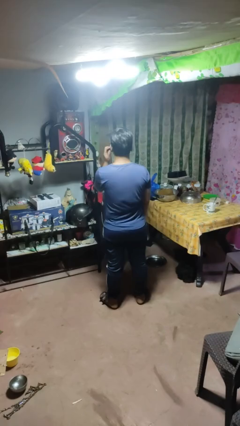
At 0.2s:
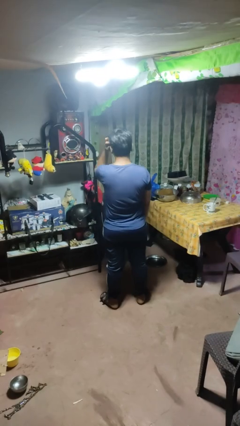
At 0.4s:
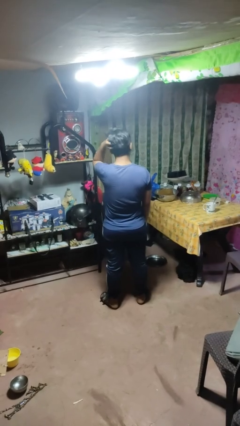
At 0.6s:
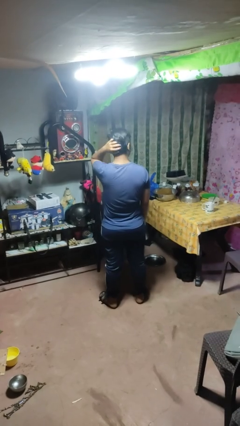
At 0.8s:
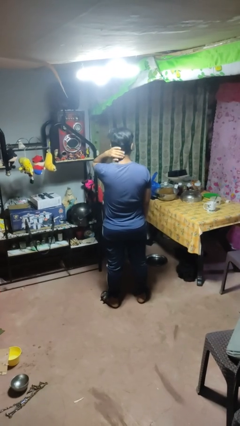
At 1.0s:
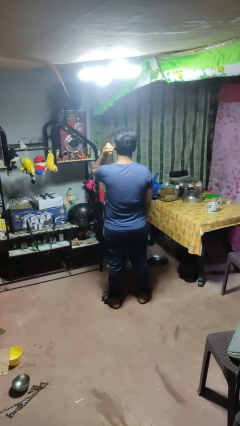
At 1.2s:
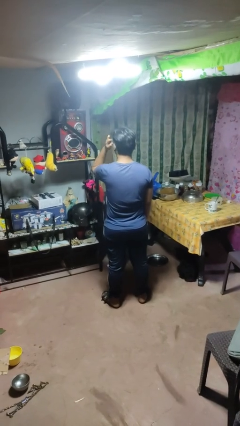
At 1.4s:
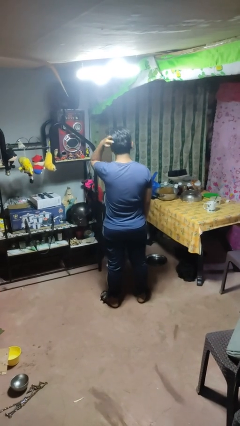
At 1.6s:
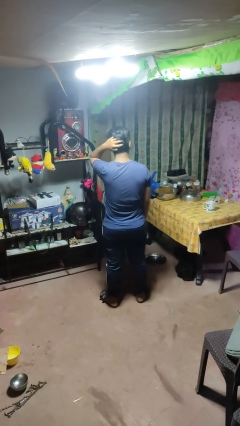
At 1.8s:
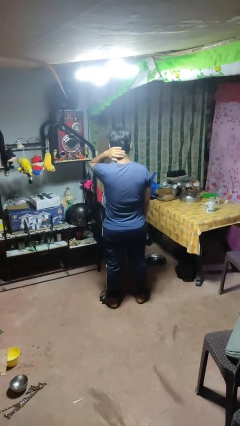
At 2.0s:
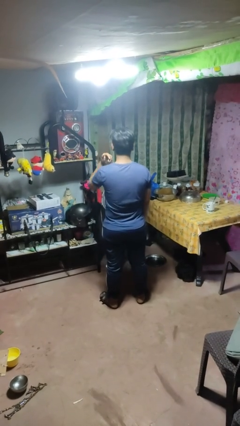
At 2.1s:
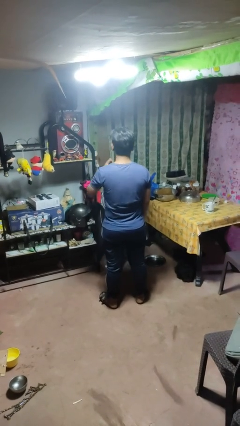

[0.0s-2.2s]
person strokes hair

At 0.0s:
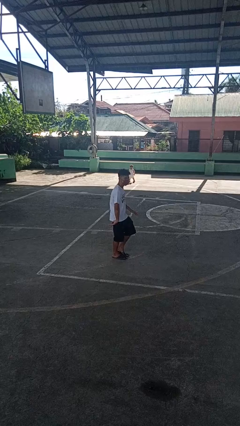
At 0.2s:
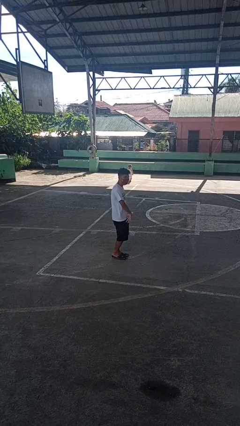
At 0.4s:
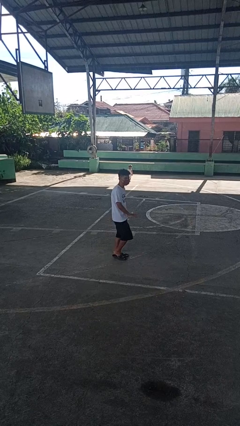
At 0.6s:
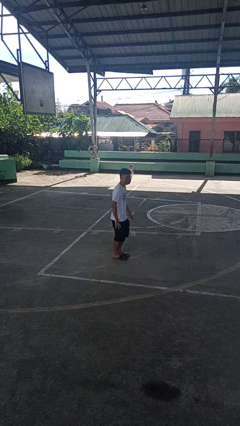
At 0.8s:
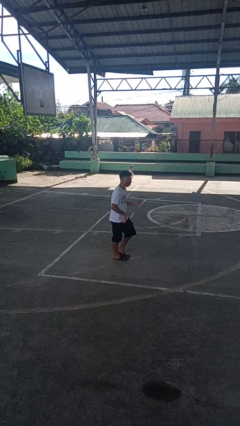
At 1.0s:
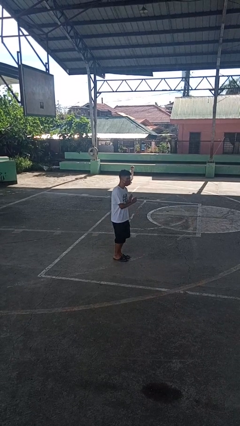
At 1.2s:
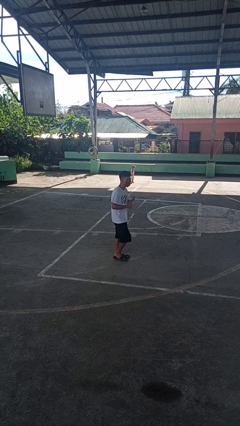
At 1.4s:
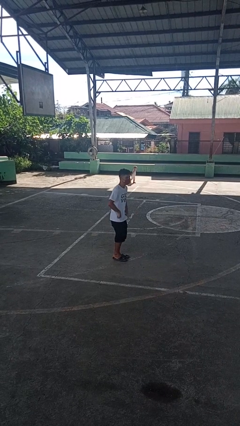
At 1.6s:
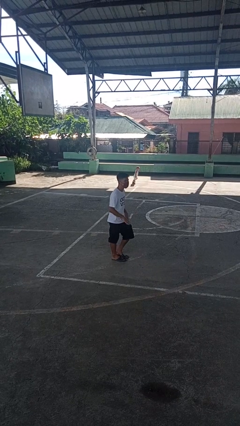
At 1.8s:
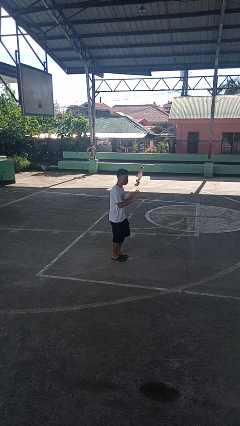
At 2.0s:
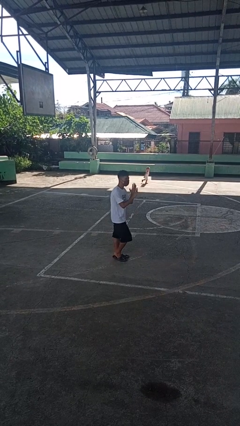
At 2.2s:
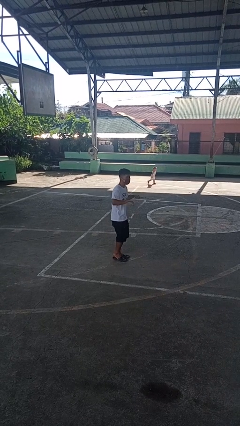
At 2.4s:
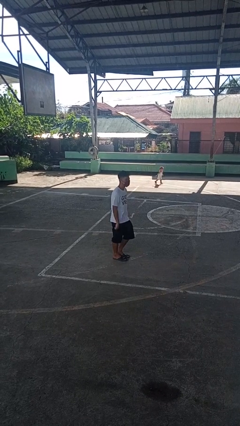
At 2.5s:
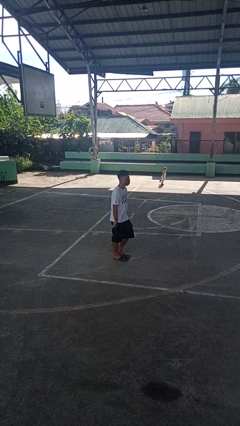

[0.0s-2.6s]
person dances in place

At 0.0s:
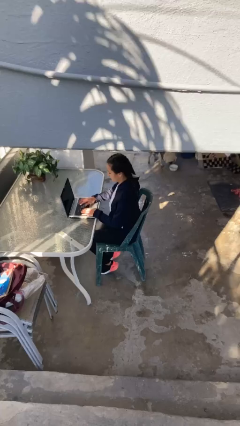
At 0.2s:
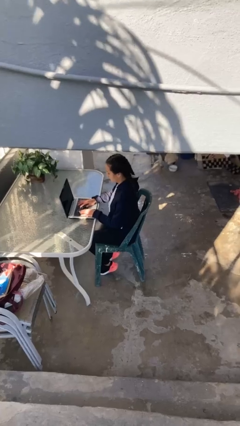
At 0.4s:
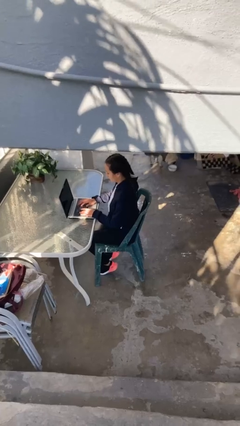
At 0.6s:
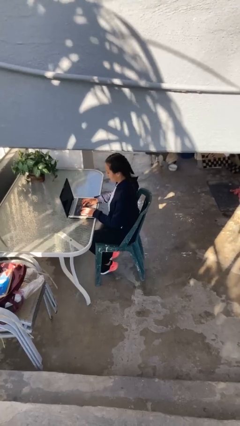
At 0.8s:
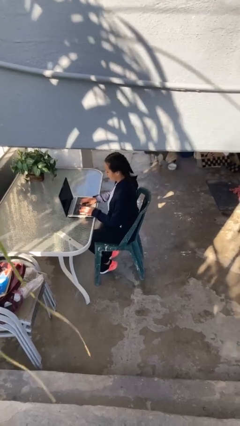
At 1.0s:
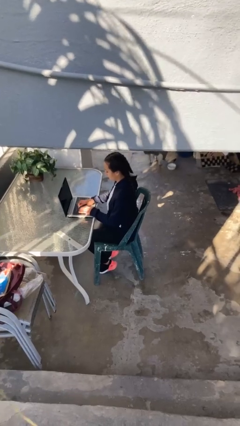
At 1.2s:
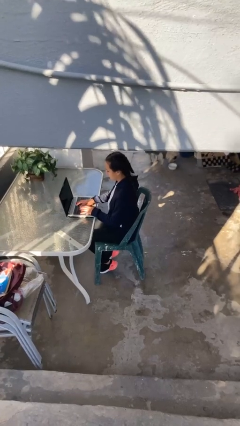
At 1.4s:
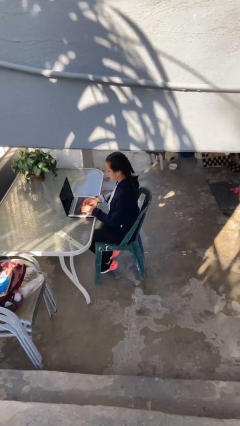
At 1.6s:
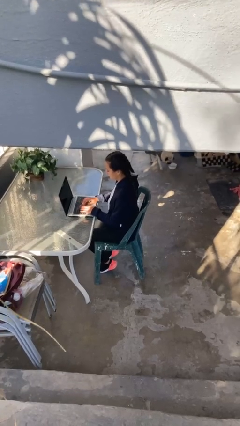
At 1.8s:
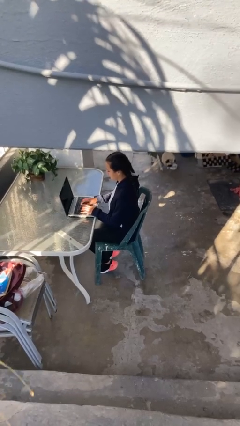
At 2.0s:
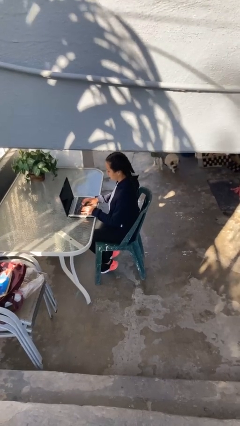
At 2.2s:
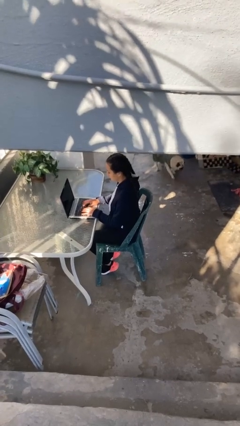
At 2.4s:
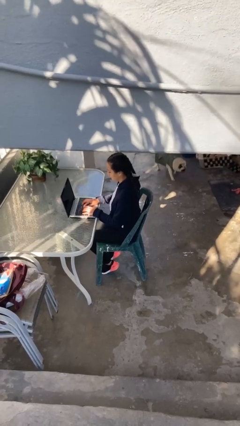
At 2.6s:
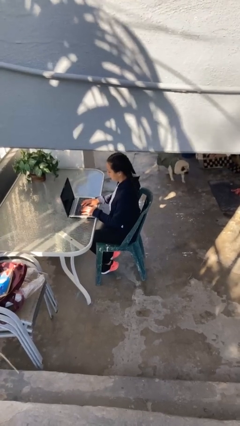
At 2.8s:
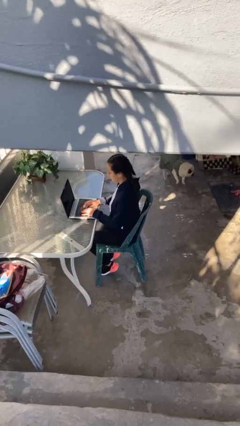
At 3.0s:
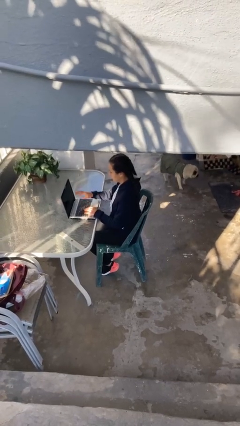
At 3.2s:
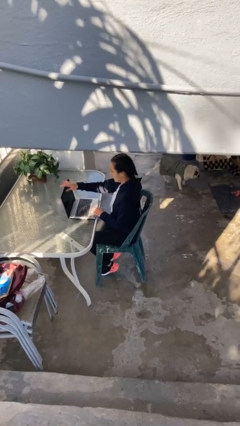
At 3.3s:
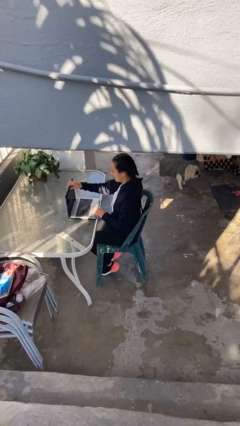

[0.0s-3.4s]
person interacts with laptop

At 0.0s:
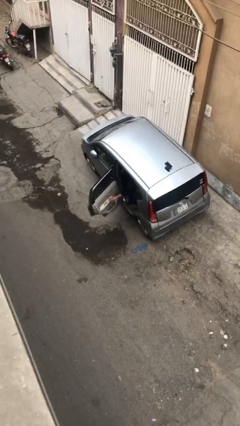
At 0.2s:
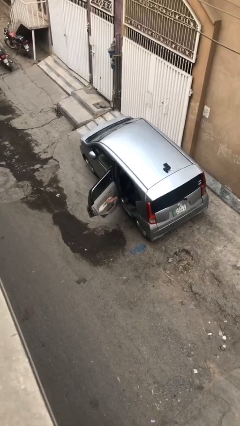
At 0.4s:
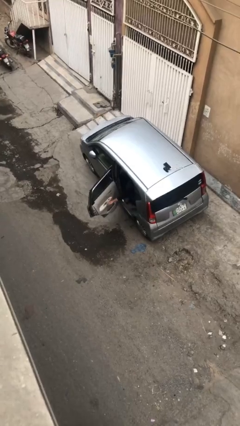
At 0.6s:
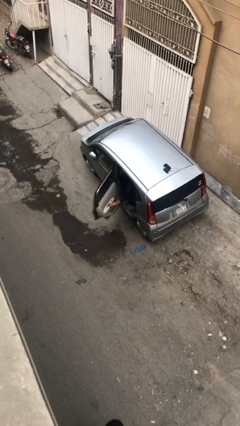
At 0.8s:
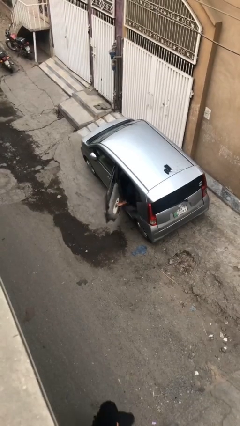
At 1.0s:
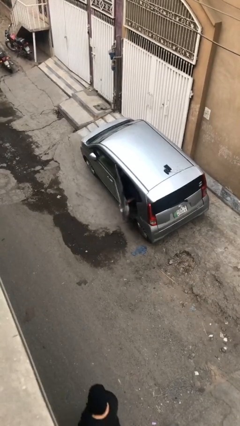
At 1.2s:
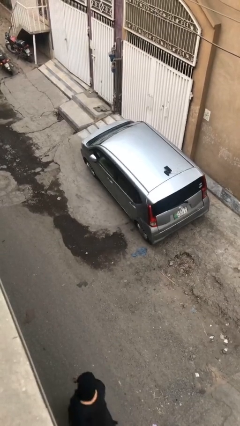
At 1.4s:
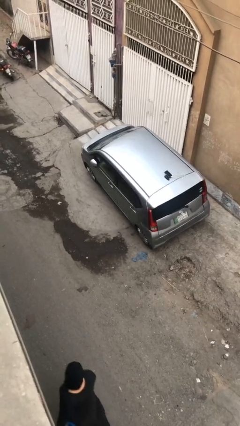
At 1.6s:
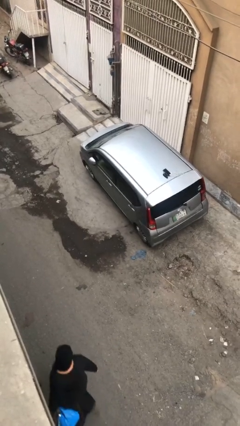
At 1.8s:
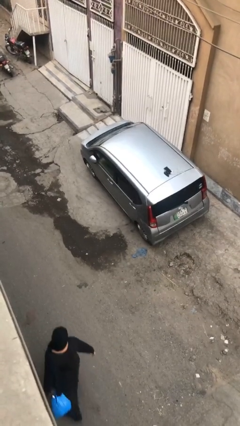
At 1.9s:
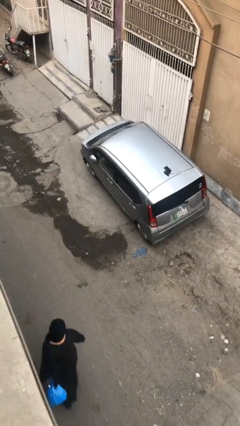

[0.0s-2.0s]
person closes car door

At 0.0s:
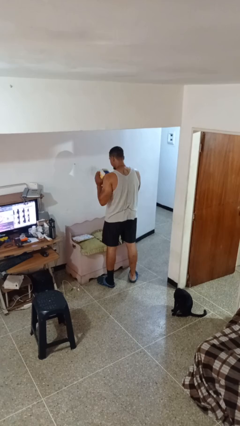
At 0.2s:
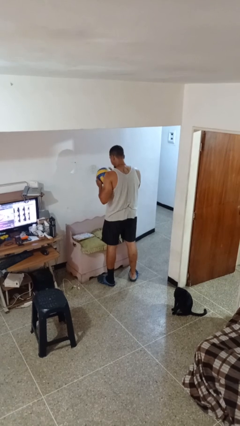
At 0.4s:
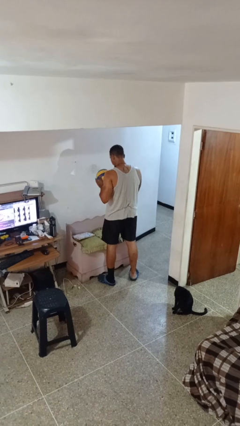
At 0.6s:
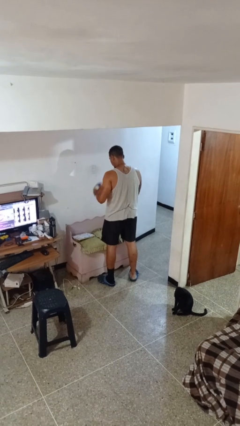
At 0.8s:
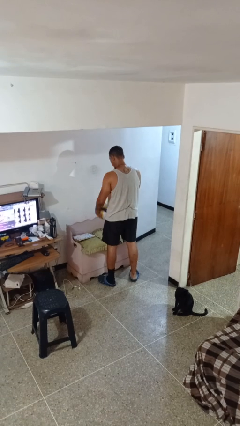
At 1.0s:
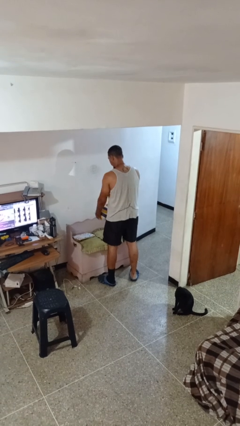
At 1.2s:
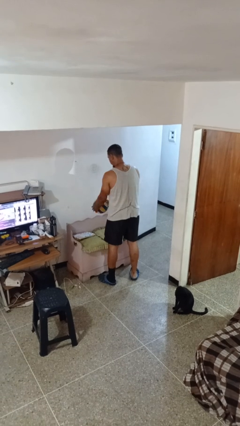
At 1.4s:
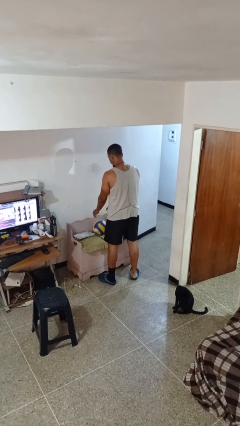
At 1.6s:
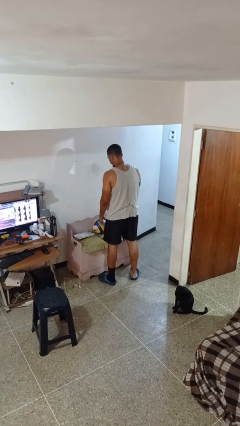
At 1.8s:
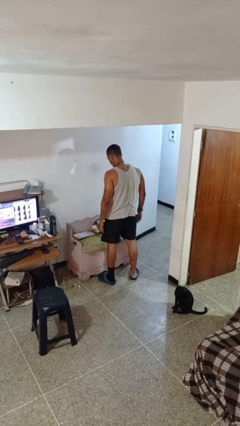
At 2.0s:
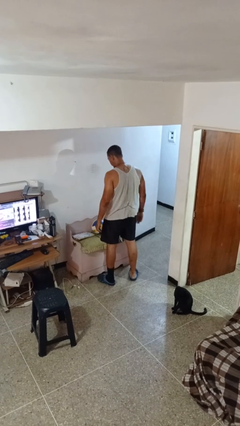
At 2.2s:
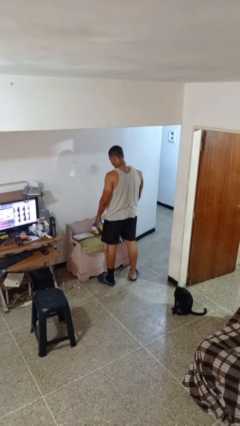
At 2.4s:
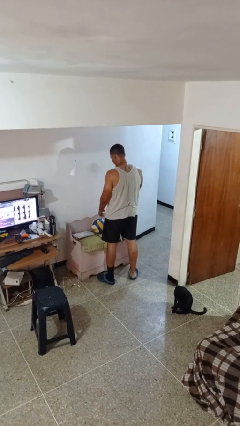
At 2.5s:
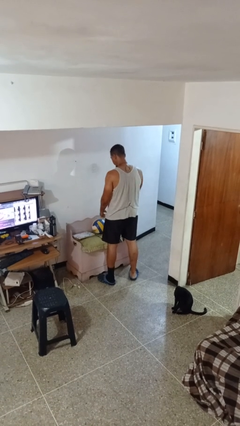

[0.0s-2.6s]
person puts down object on couch

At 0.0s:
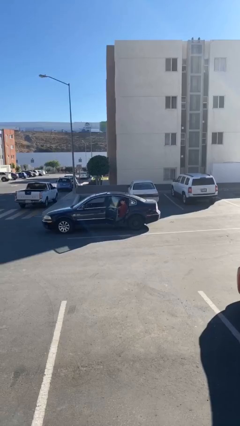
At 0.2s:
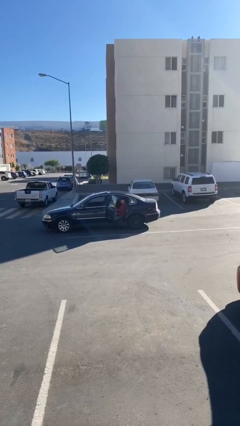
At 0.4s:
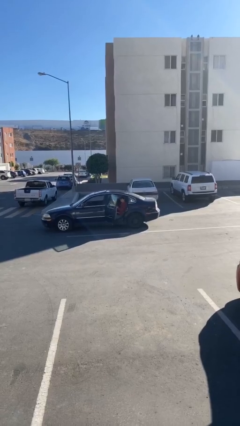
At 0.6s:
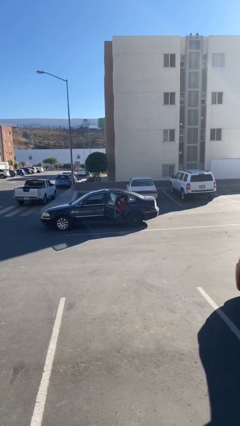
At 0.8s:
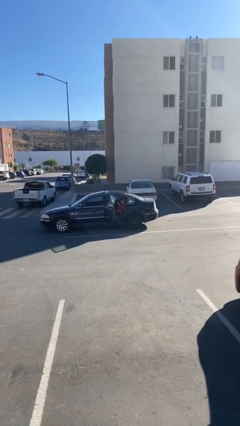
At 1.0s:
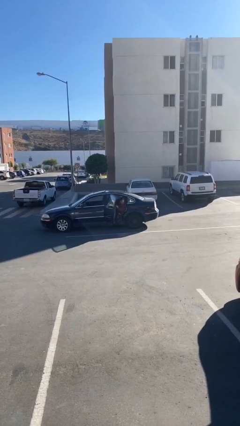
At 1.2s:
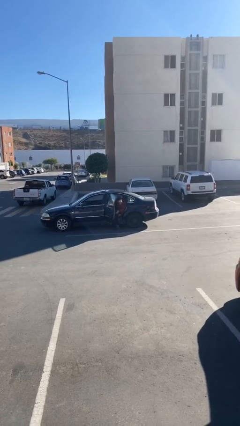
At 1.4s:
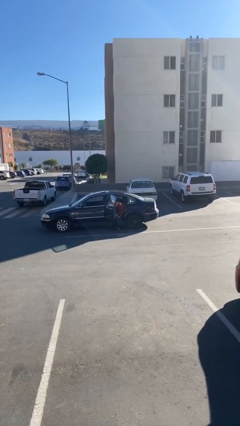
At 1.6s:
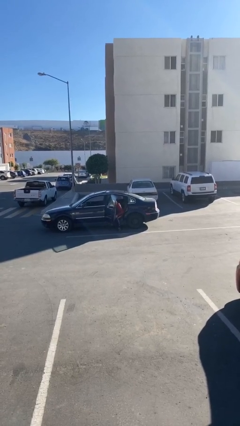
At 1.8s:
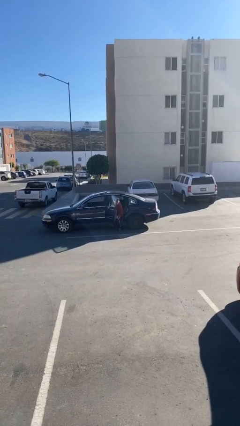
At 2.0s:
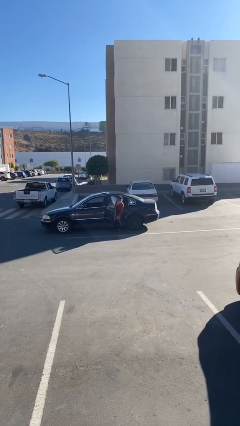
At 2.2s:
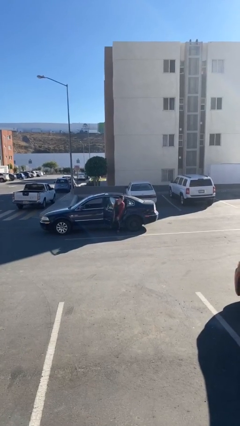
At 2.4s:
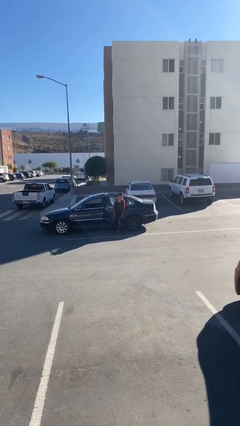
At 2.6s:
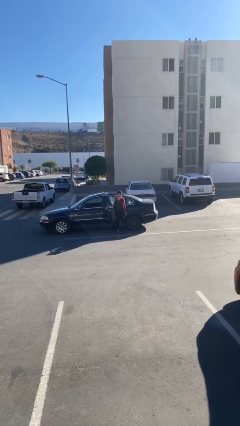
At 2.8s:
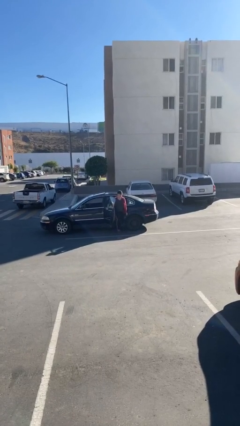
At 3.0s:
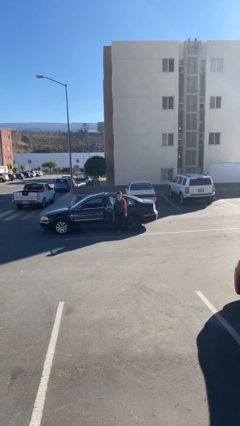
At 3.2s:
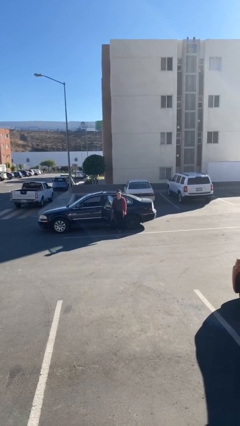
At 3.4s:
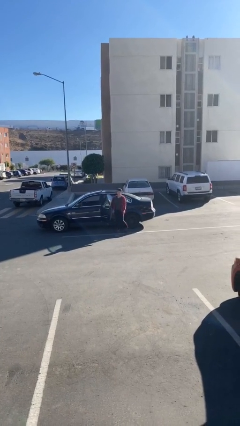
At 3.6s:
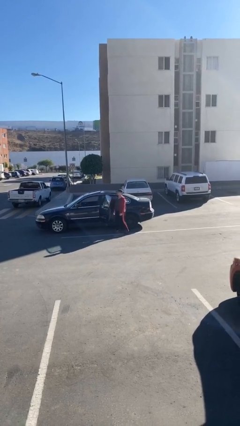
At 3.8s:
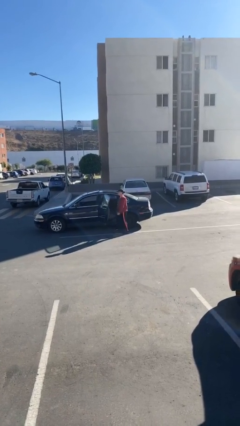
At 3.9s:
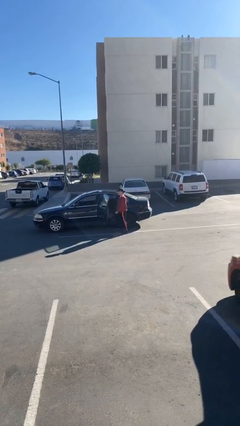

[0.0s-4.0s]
person exits car

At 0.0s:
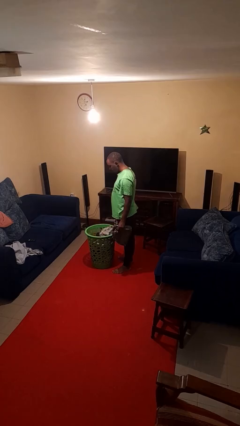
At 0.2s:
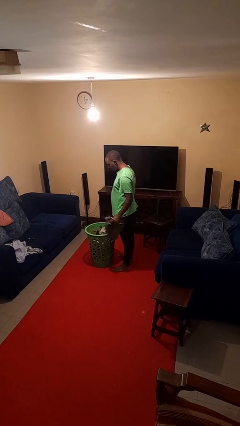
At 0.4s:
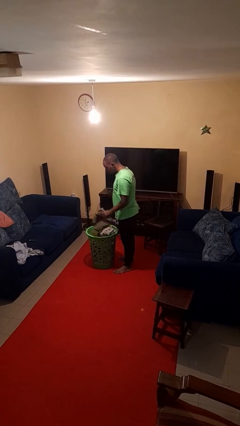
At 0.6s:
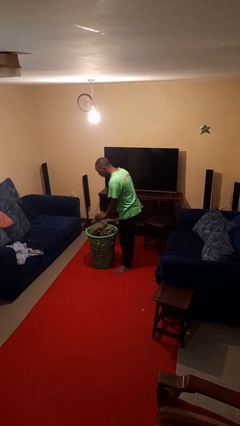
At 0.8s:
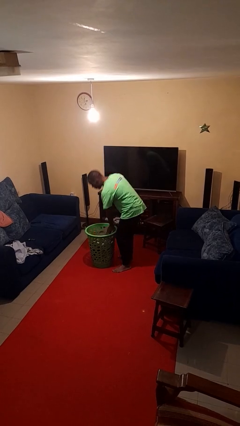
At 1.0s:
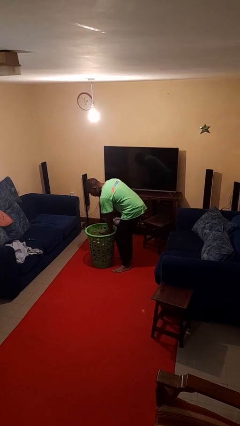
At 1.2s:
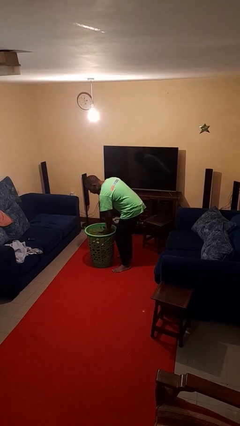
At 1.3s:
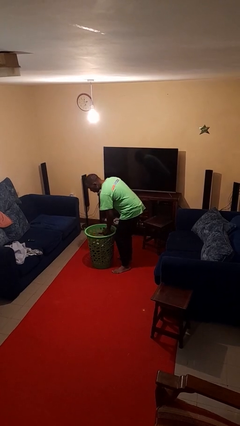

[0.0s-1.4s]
person puts object into basket
